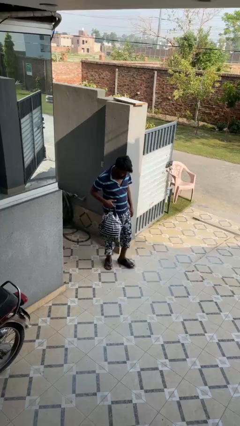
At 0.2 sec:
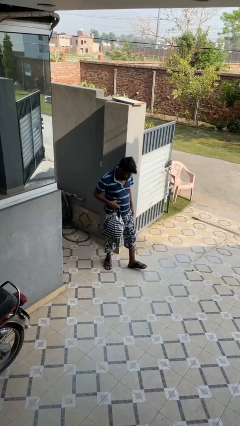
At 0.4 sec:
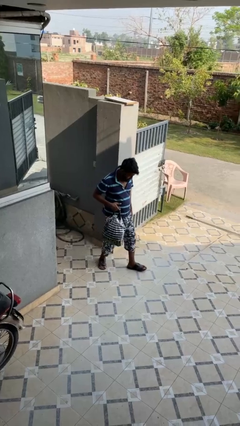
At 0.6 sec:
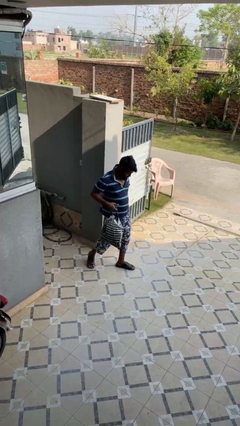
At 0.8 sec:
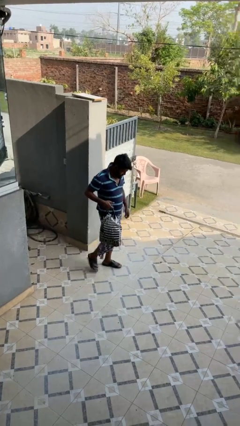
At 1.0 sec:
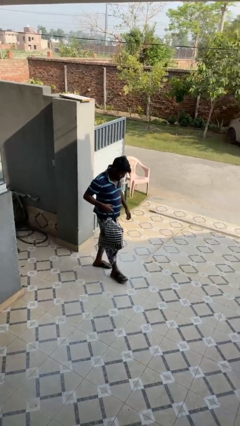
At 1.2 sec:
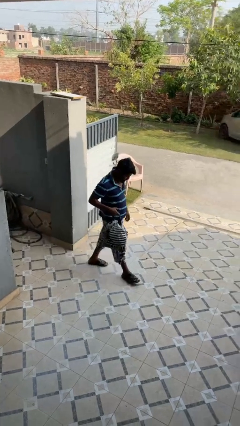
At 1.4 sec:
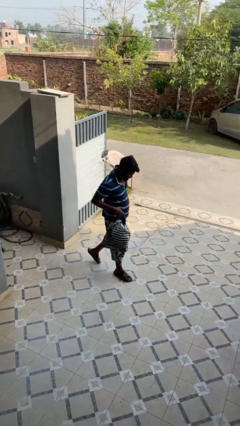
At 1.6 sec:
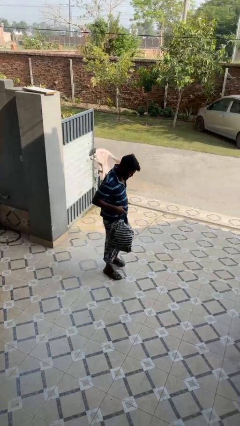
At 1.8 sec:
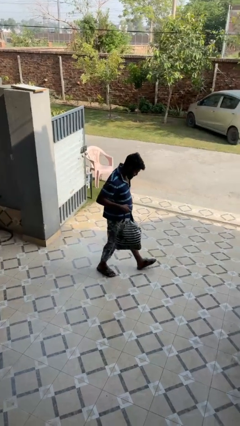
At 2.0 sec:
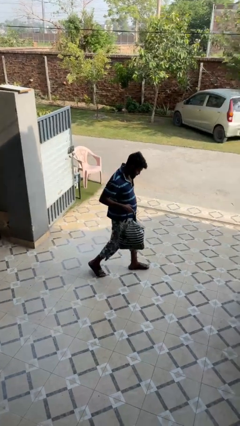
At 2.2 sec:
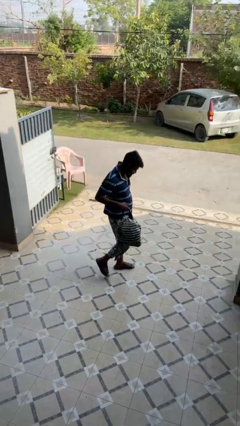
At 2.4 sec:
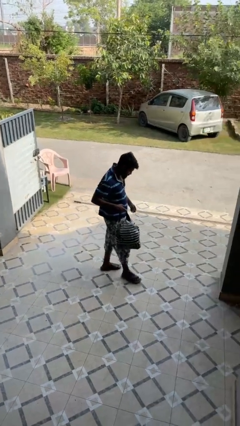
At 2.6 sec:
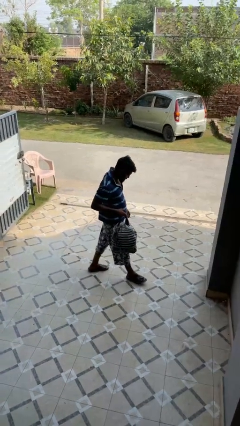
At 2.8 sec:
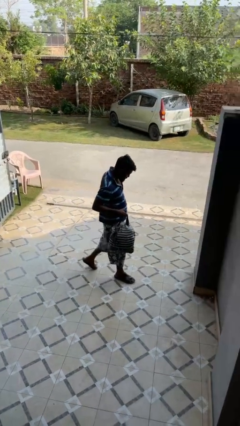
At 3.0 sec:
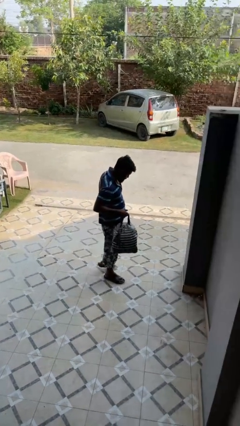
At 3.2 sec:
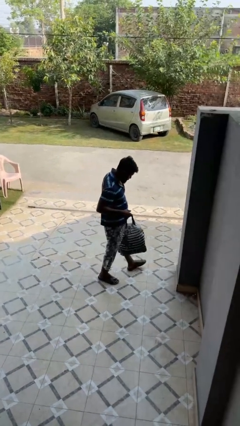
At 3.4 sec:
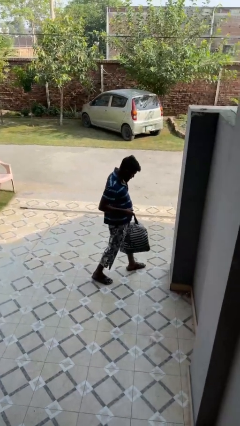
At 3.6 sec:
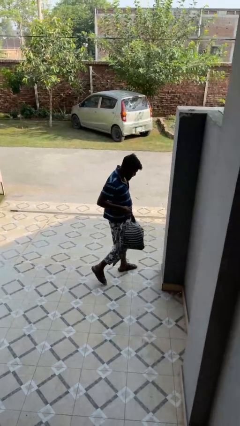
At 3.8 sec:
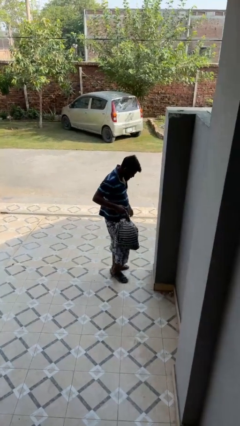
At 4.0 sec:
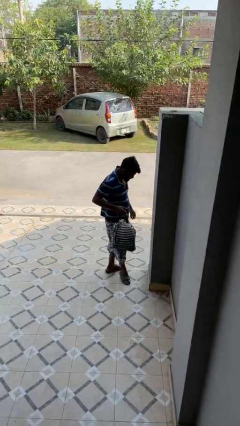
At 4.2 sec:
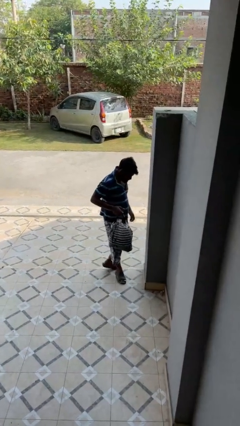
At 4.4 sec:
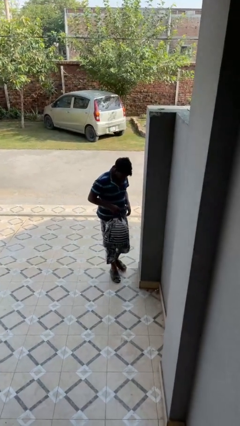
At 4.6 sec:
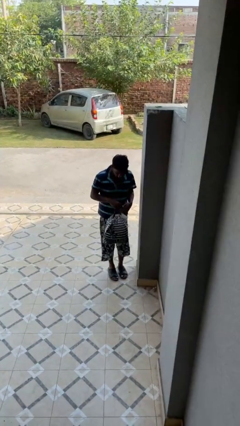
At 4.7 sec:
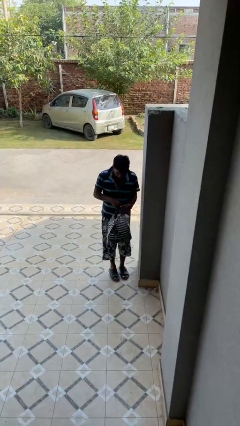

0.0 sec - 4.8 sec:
person carries groceries

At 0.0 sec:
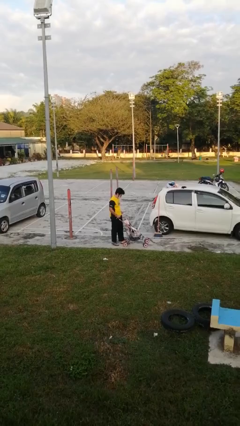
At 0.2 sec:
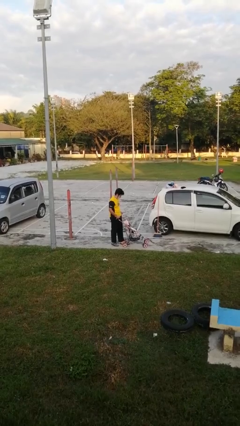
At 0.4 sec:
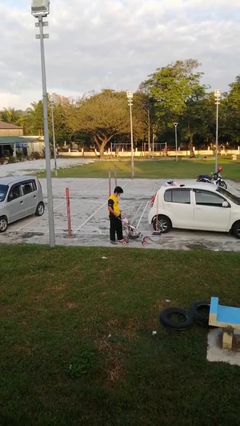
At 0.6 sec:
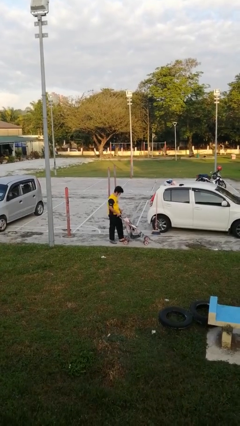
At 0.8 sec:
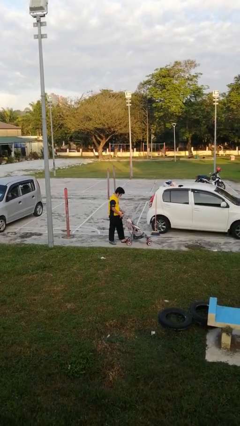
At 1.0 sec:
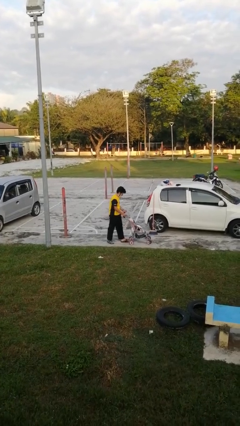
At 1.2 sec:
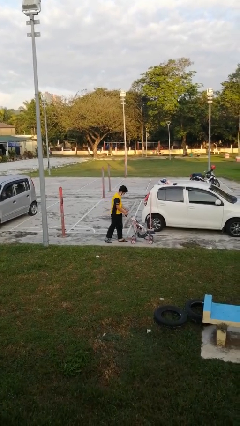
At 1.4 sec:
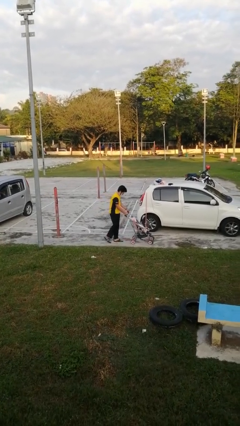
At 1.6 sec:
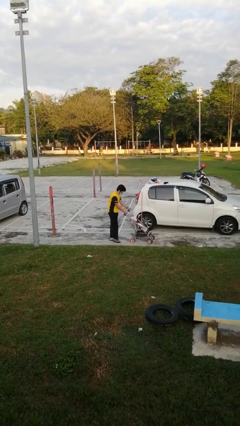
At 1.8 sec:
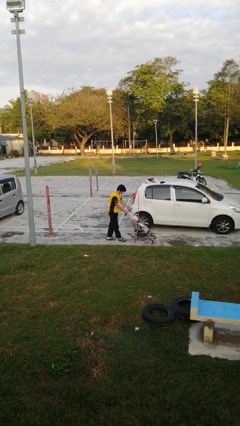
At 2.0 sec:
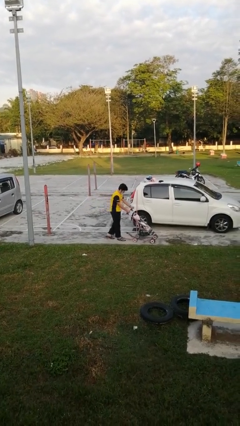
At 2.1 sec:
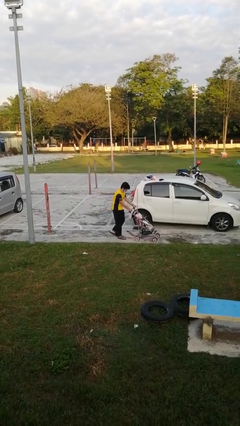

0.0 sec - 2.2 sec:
person pushes wheeled cart

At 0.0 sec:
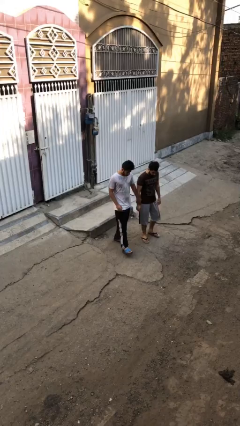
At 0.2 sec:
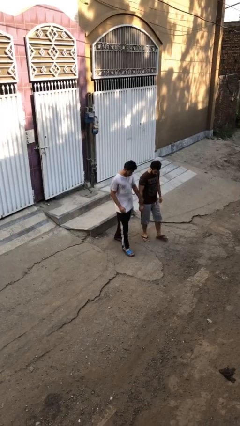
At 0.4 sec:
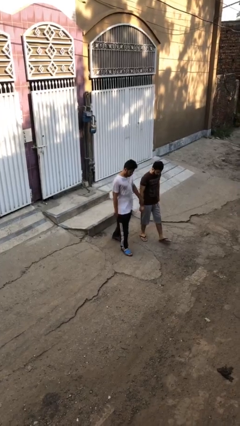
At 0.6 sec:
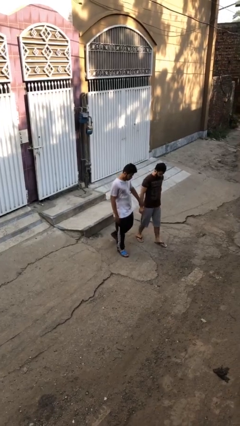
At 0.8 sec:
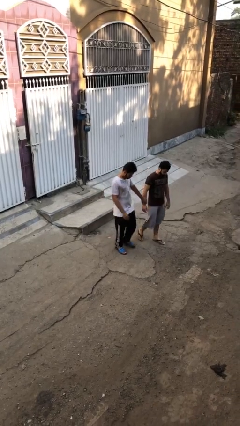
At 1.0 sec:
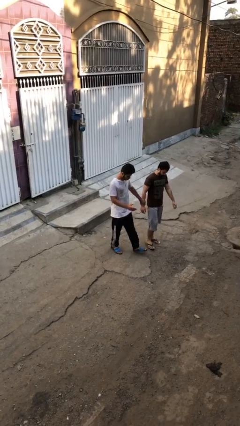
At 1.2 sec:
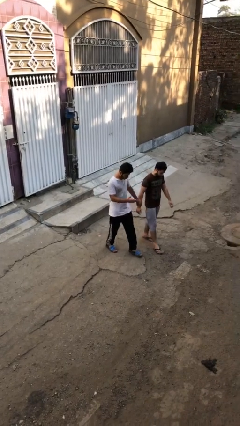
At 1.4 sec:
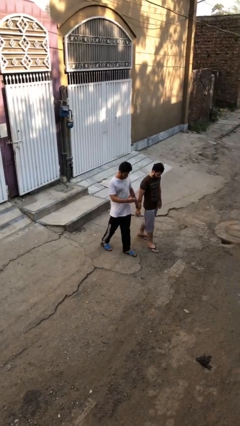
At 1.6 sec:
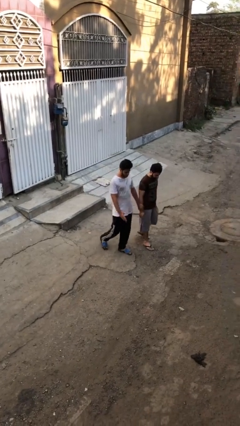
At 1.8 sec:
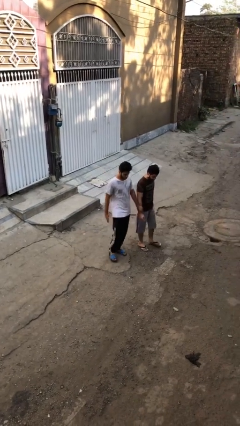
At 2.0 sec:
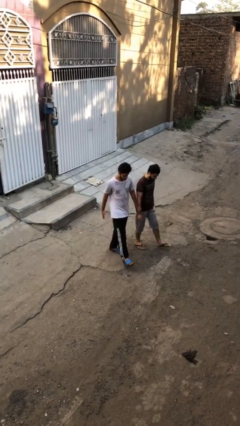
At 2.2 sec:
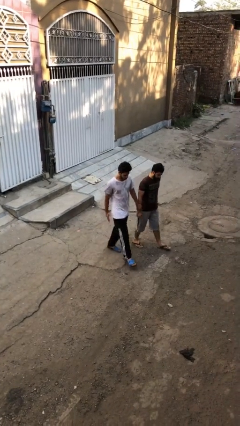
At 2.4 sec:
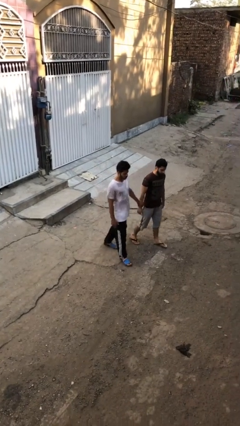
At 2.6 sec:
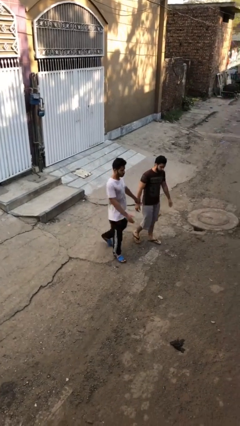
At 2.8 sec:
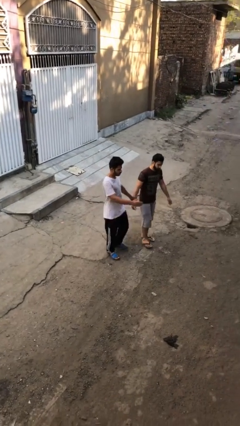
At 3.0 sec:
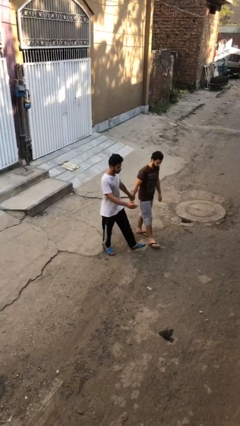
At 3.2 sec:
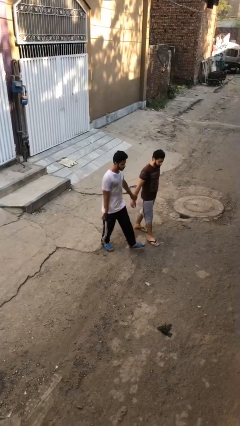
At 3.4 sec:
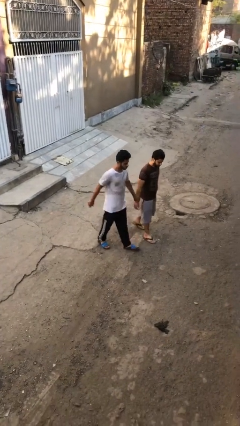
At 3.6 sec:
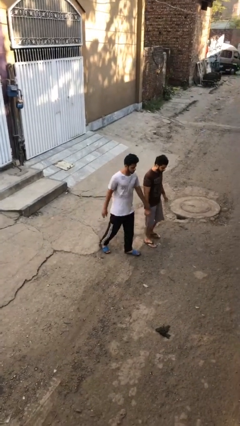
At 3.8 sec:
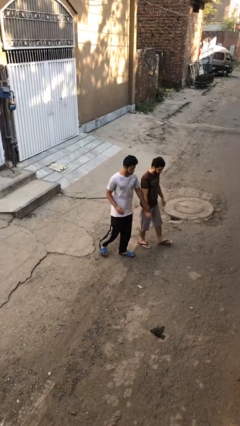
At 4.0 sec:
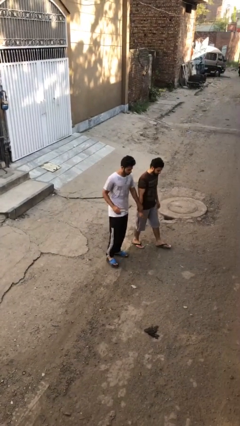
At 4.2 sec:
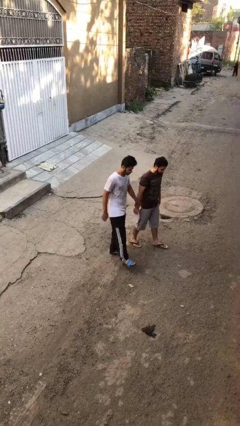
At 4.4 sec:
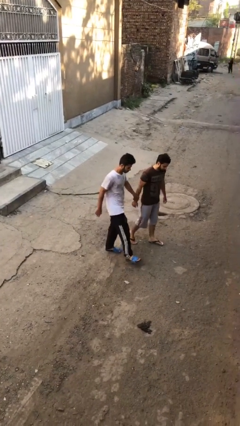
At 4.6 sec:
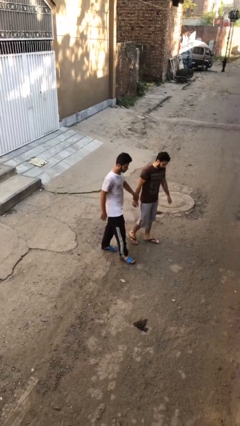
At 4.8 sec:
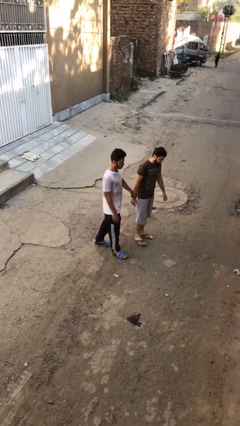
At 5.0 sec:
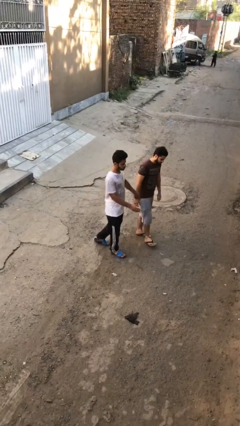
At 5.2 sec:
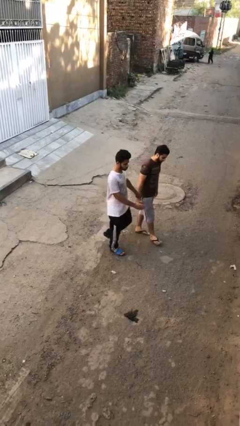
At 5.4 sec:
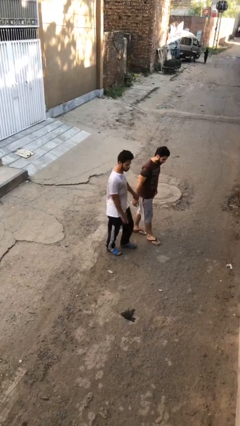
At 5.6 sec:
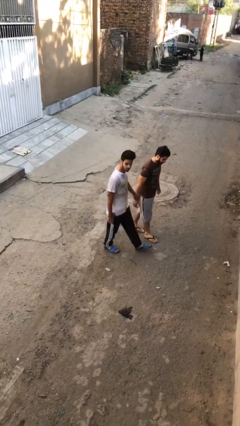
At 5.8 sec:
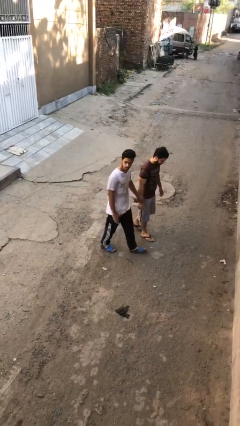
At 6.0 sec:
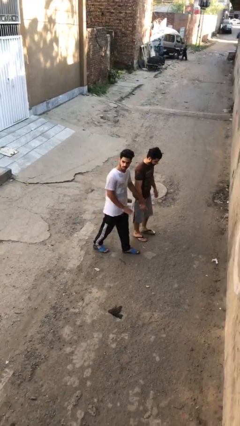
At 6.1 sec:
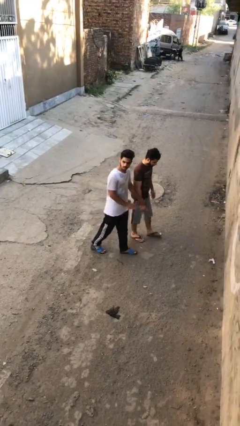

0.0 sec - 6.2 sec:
person holds hand

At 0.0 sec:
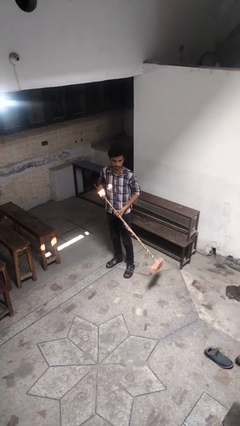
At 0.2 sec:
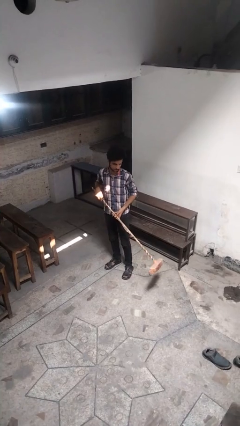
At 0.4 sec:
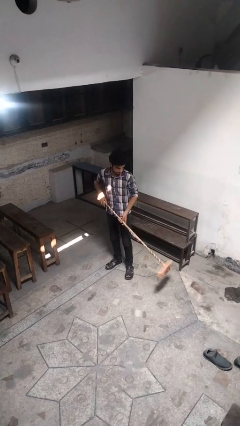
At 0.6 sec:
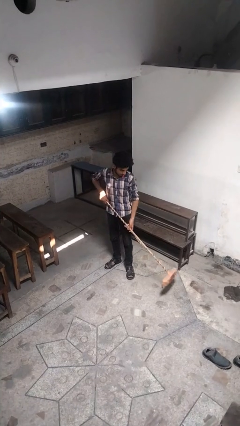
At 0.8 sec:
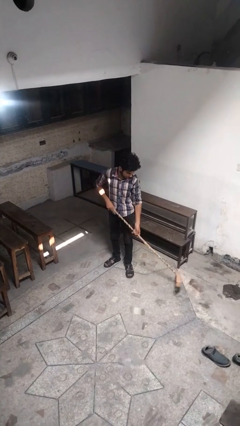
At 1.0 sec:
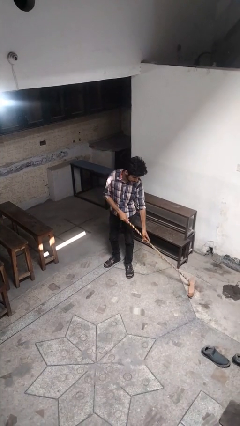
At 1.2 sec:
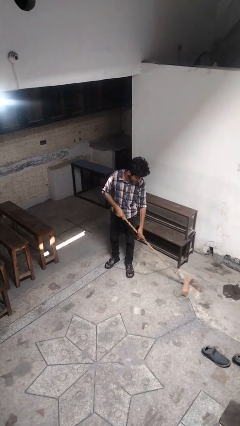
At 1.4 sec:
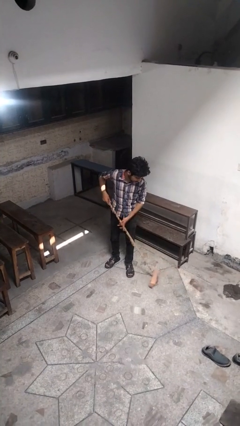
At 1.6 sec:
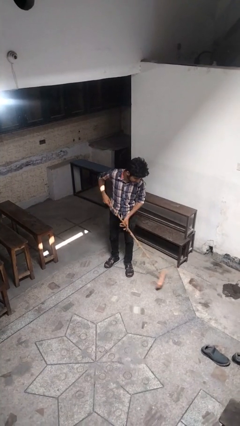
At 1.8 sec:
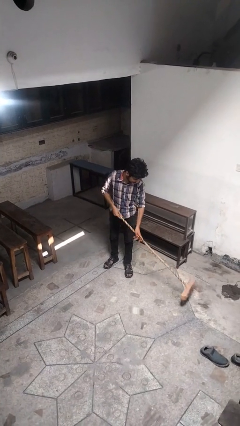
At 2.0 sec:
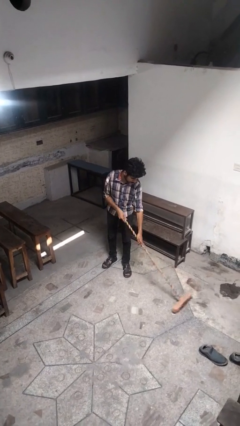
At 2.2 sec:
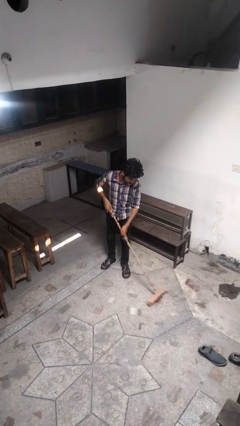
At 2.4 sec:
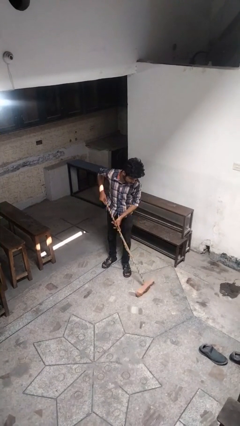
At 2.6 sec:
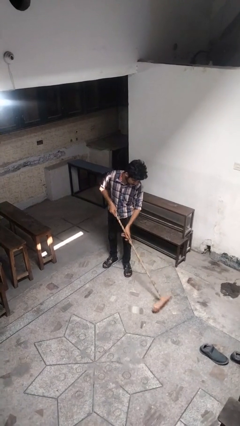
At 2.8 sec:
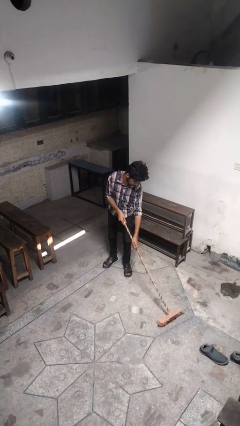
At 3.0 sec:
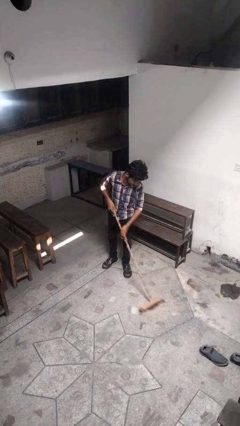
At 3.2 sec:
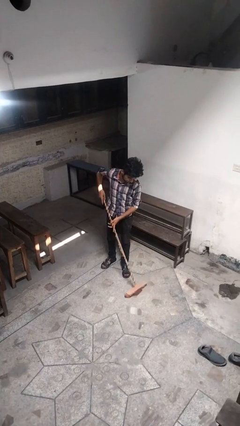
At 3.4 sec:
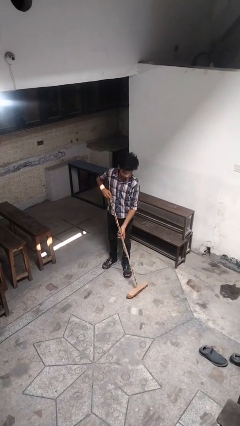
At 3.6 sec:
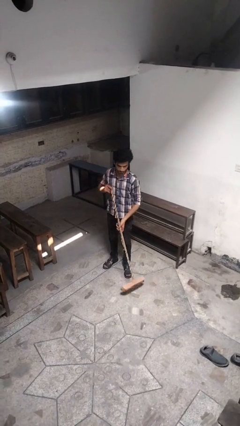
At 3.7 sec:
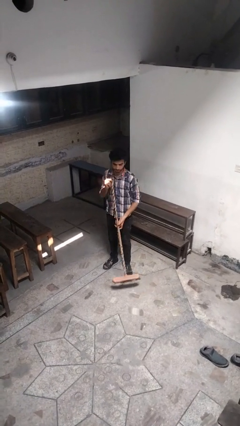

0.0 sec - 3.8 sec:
person sweeps floor

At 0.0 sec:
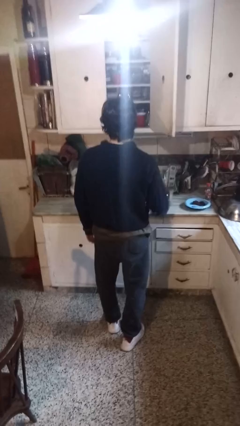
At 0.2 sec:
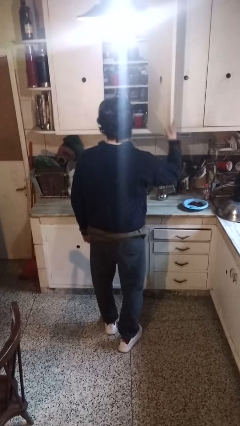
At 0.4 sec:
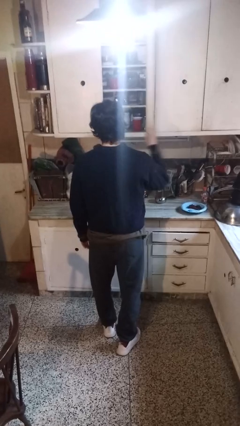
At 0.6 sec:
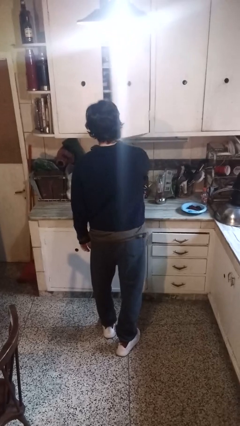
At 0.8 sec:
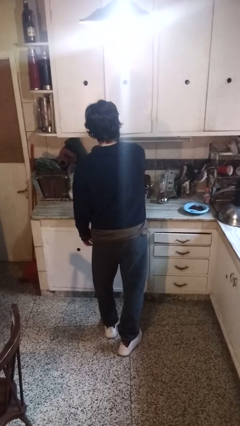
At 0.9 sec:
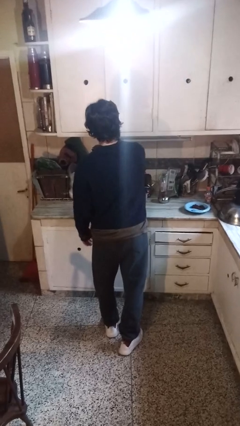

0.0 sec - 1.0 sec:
person closes cabinet
